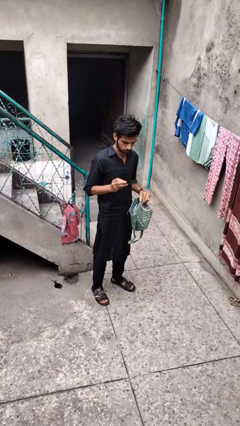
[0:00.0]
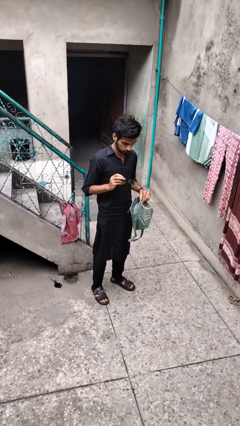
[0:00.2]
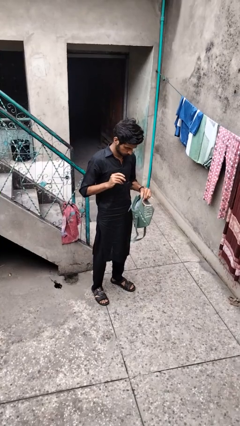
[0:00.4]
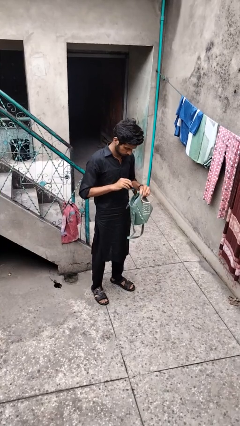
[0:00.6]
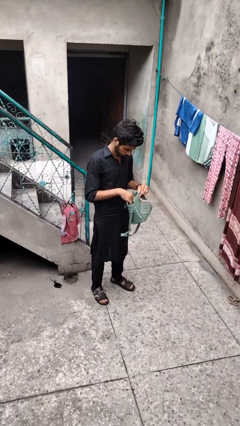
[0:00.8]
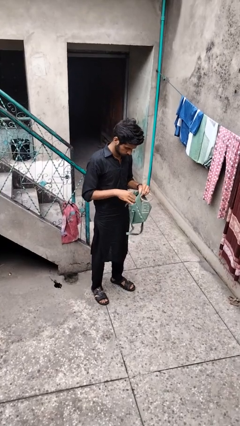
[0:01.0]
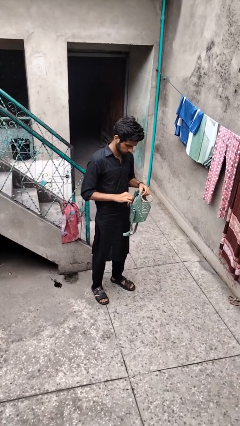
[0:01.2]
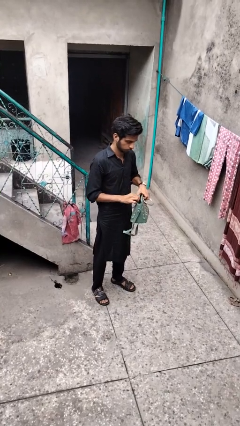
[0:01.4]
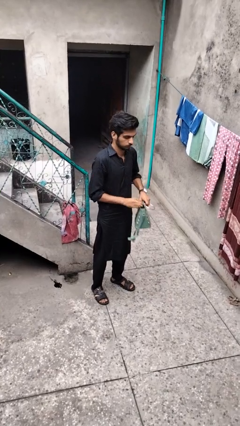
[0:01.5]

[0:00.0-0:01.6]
person puts object into purse

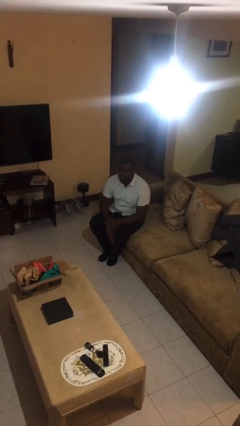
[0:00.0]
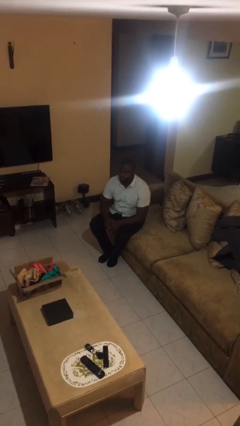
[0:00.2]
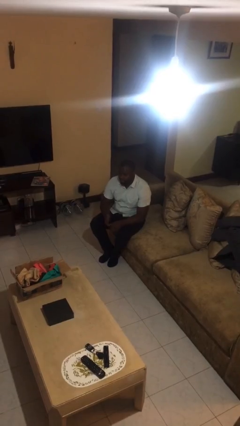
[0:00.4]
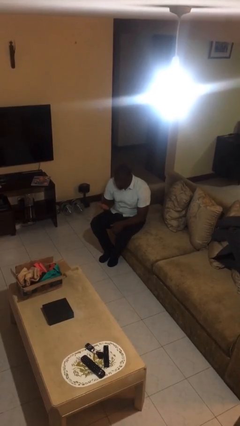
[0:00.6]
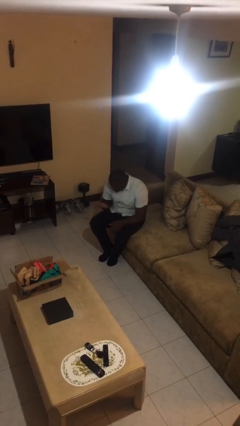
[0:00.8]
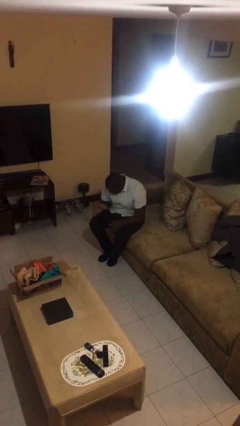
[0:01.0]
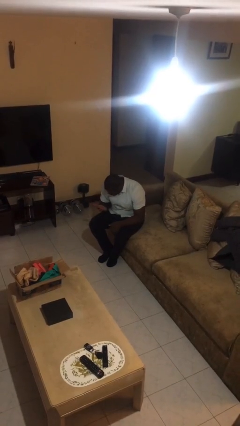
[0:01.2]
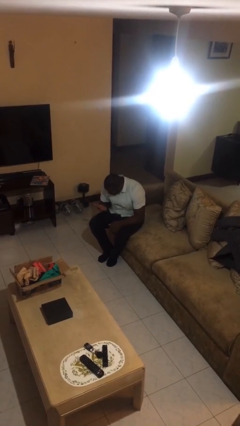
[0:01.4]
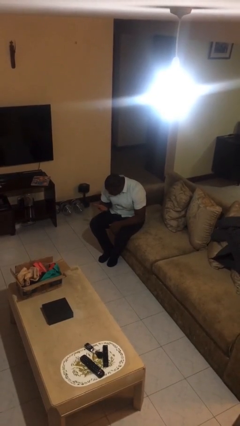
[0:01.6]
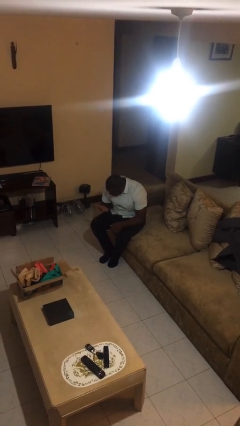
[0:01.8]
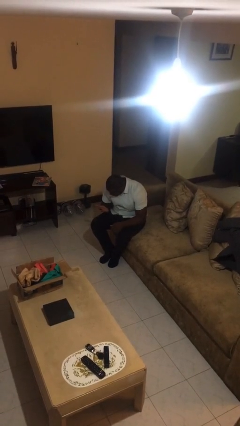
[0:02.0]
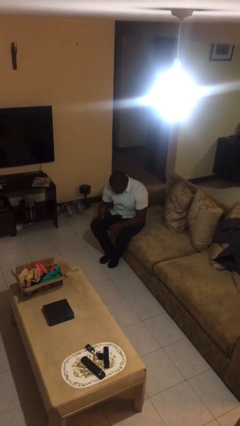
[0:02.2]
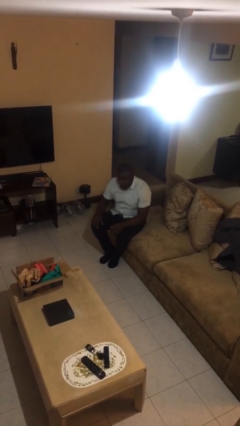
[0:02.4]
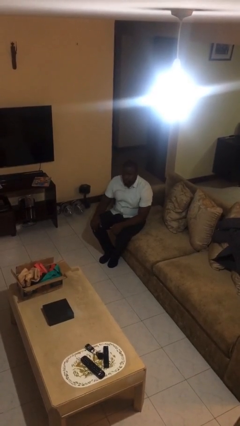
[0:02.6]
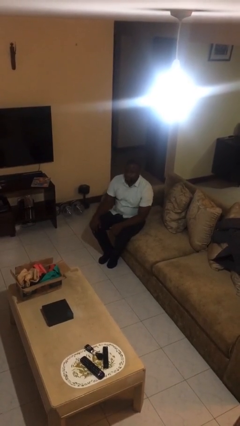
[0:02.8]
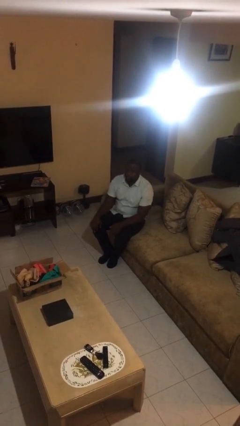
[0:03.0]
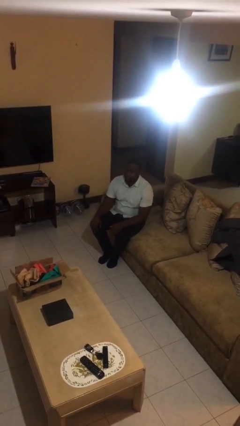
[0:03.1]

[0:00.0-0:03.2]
person looks at hands in lap

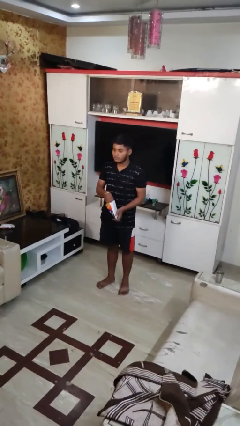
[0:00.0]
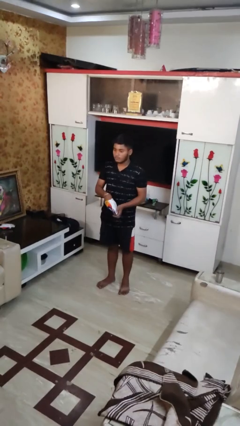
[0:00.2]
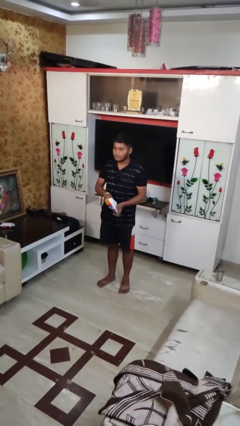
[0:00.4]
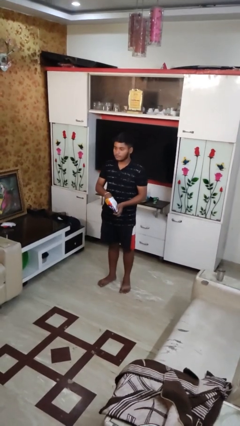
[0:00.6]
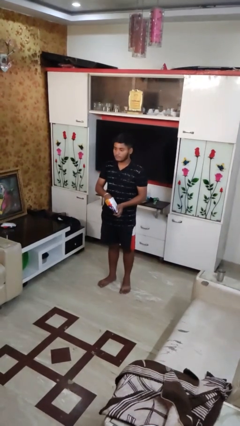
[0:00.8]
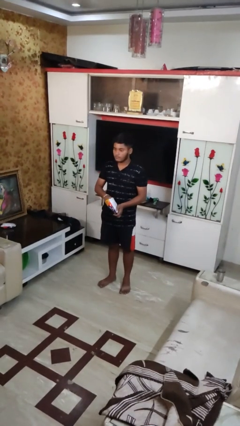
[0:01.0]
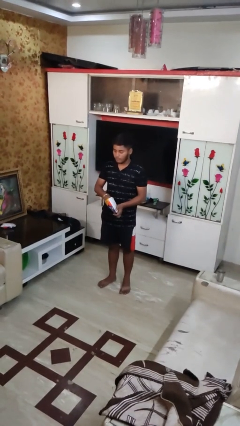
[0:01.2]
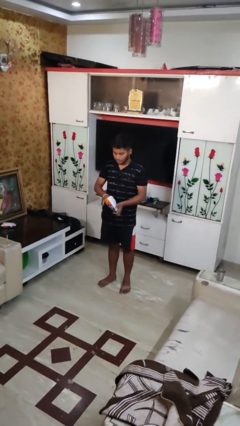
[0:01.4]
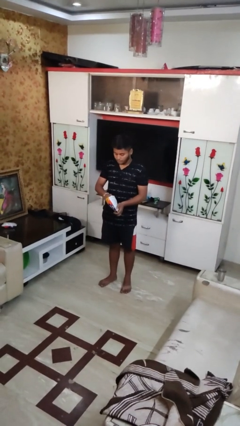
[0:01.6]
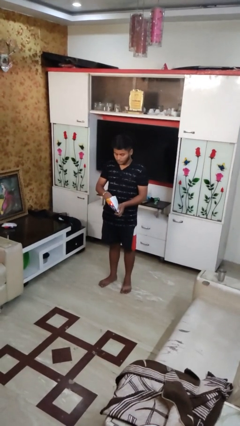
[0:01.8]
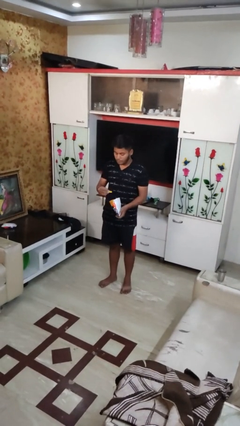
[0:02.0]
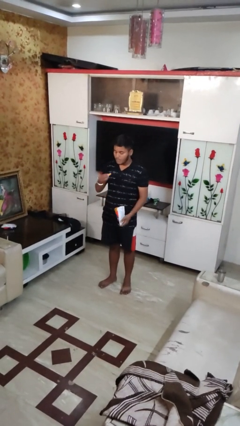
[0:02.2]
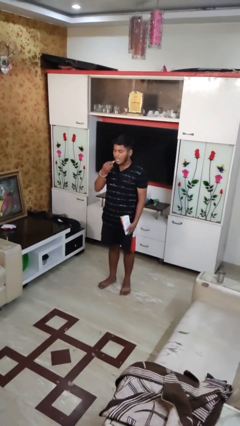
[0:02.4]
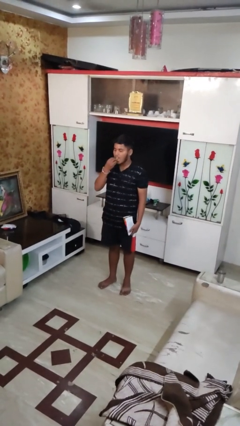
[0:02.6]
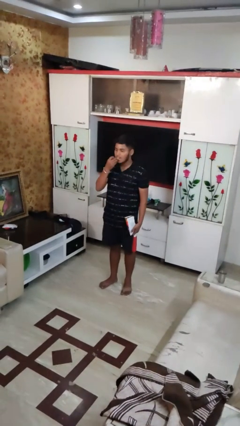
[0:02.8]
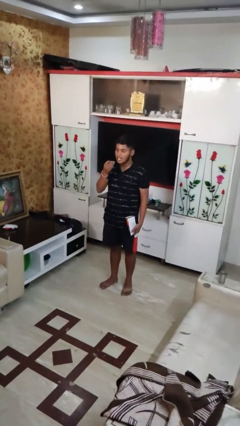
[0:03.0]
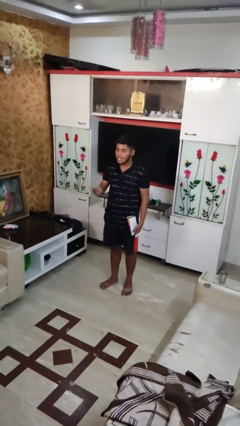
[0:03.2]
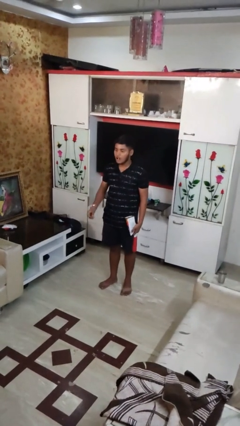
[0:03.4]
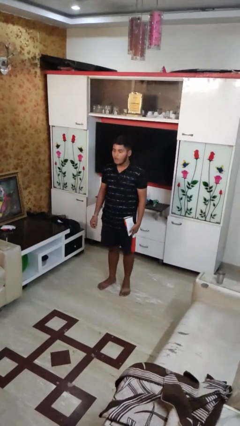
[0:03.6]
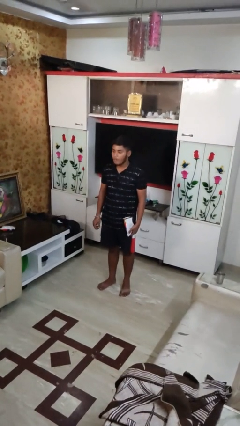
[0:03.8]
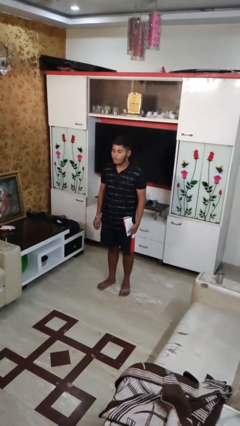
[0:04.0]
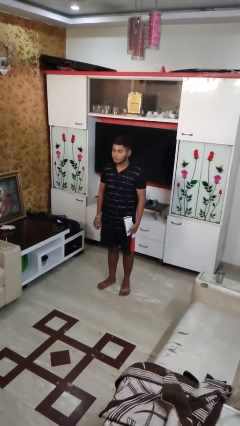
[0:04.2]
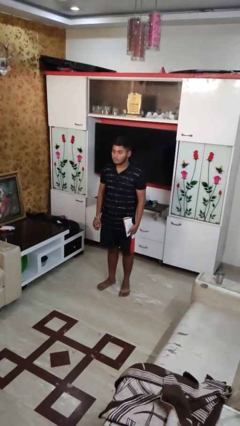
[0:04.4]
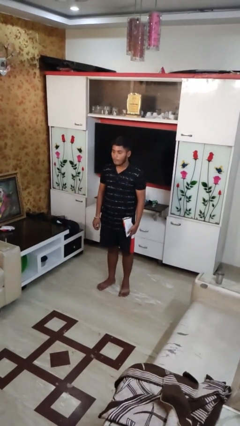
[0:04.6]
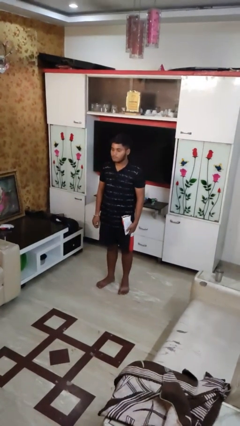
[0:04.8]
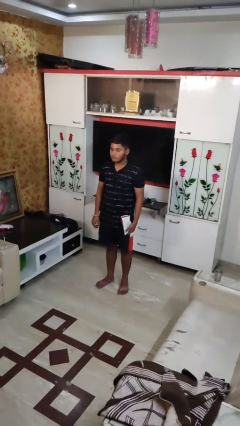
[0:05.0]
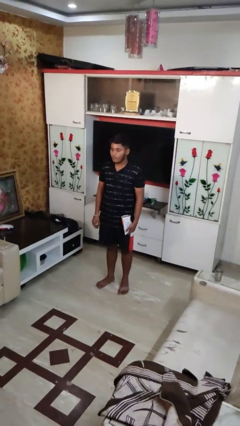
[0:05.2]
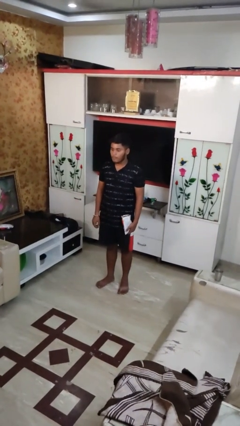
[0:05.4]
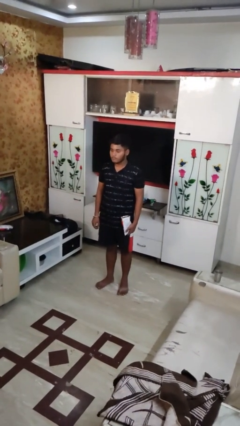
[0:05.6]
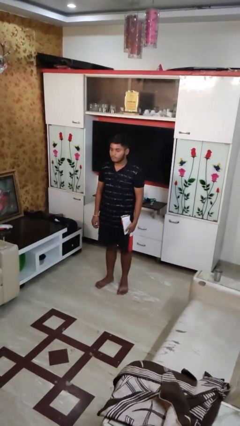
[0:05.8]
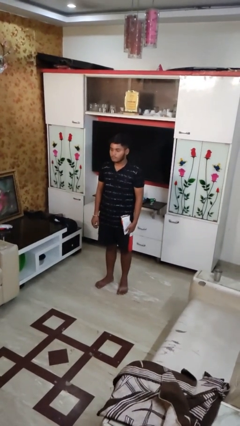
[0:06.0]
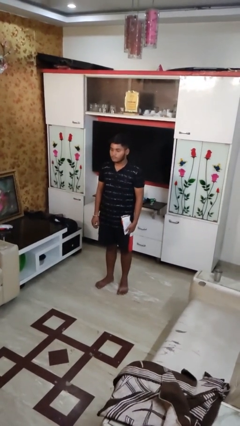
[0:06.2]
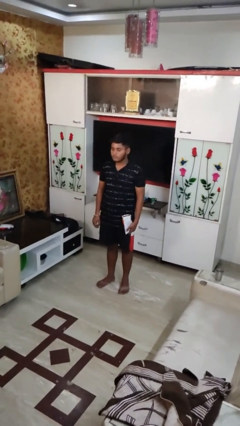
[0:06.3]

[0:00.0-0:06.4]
person eats snack from bag

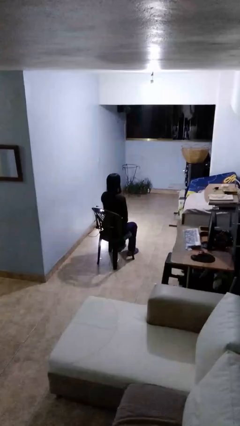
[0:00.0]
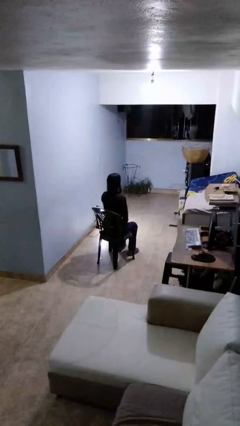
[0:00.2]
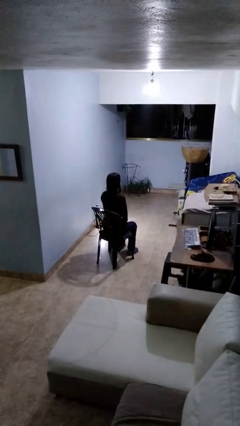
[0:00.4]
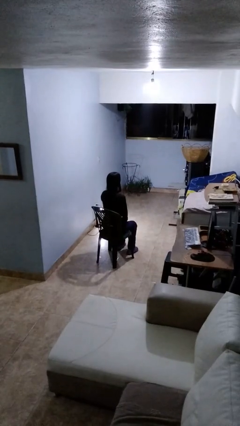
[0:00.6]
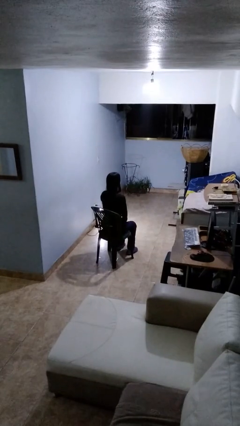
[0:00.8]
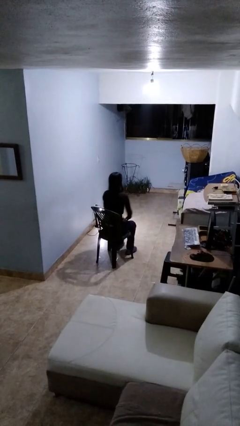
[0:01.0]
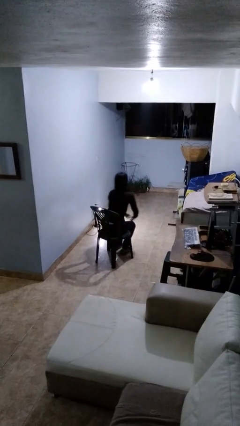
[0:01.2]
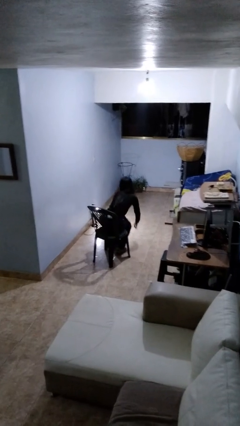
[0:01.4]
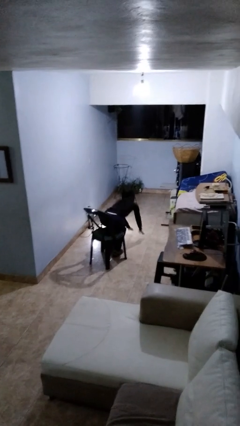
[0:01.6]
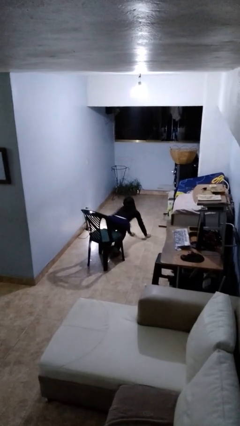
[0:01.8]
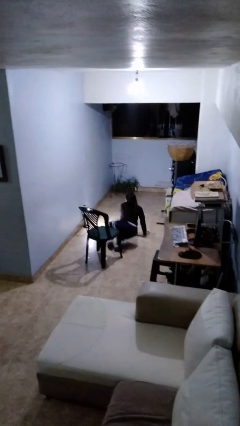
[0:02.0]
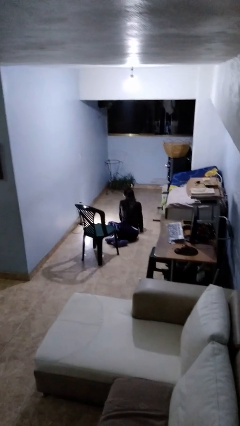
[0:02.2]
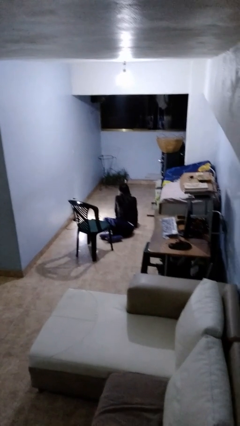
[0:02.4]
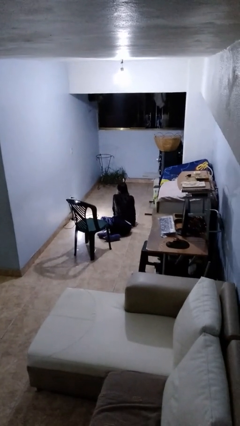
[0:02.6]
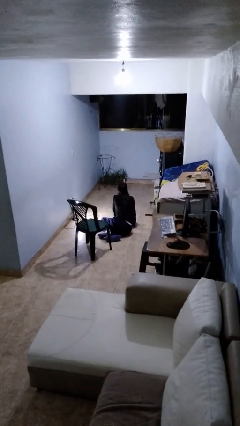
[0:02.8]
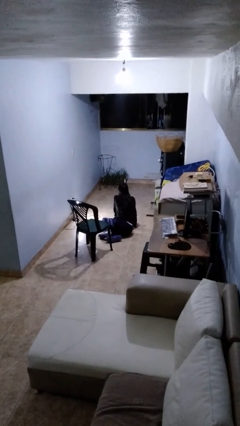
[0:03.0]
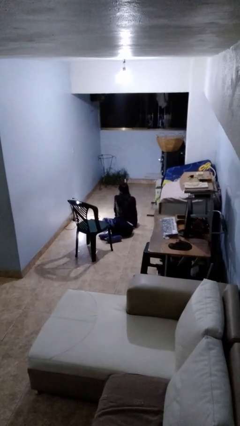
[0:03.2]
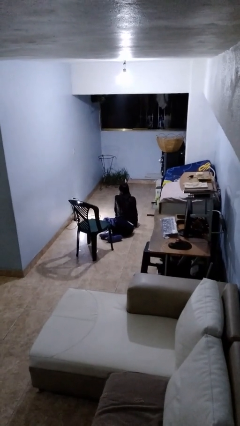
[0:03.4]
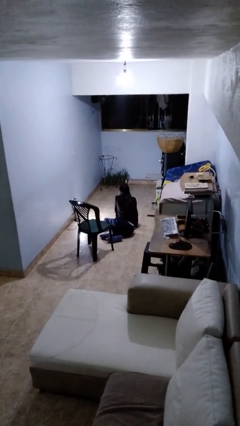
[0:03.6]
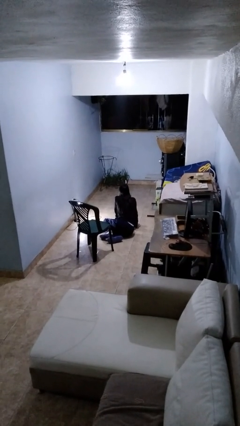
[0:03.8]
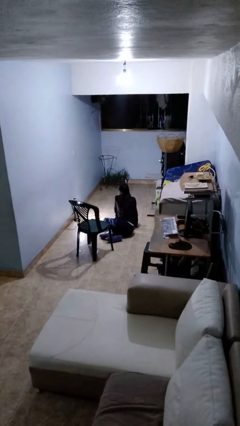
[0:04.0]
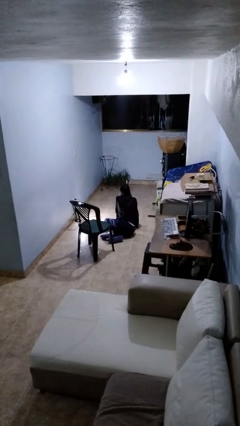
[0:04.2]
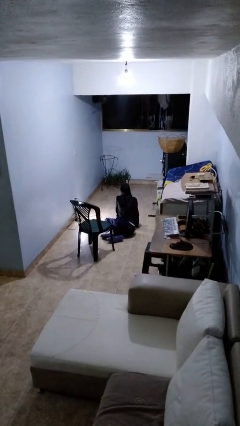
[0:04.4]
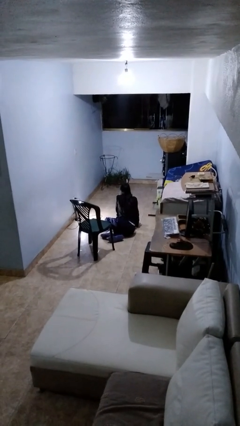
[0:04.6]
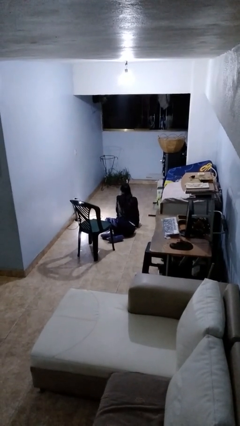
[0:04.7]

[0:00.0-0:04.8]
person falls from chair

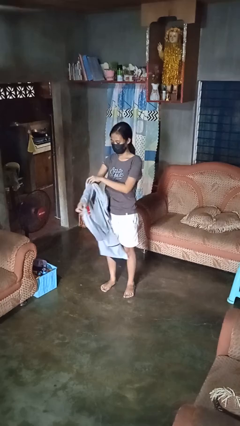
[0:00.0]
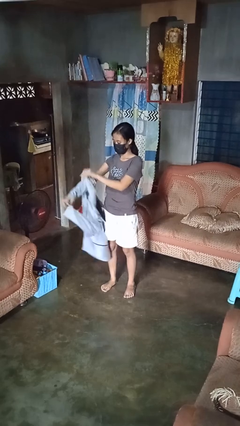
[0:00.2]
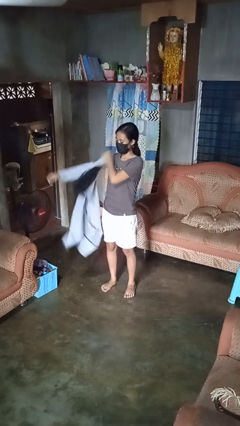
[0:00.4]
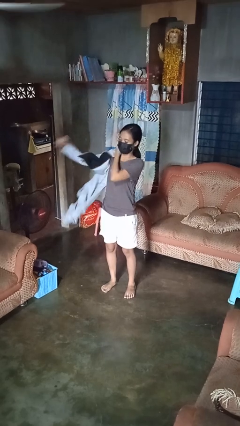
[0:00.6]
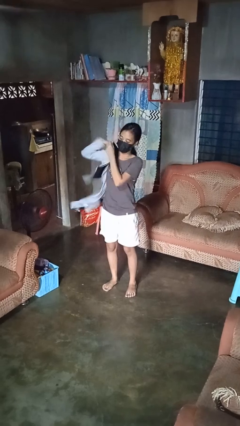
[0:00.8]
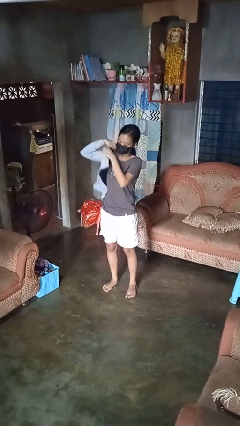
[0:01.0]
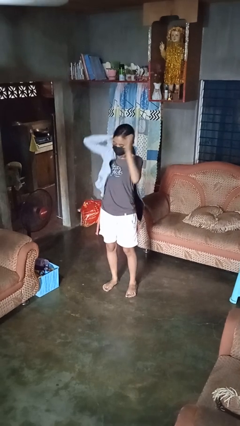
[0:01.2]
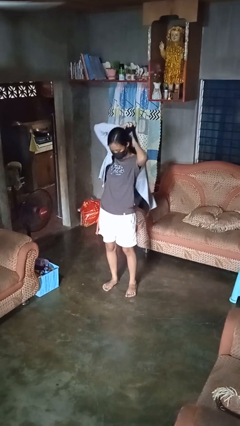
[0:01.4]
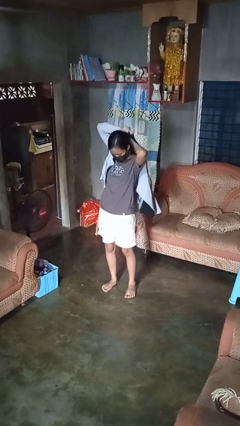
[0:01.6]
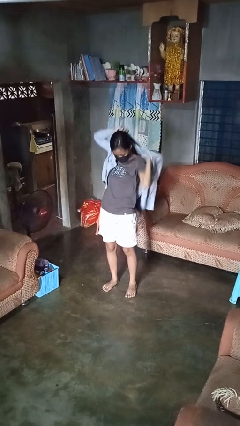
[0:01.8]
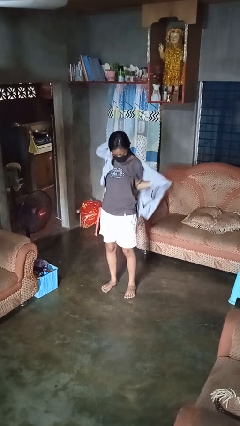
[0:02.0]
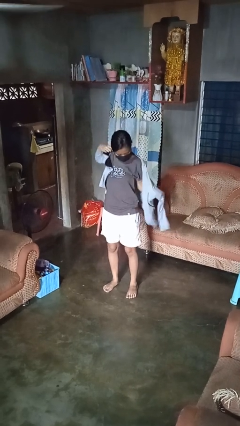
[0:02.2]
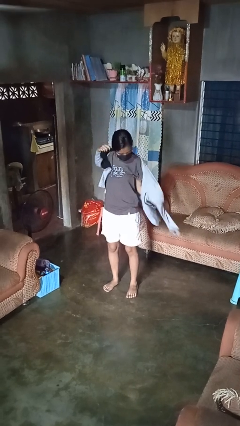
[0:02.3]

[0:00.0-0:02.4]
person puts on jacket
